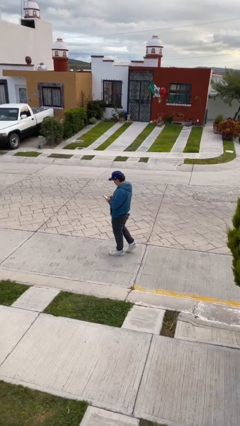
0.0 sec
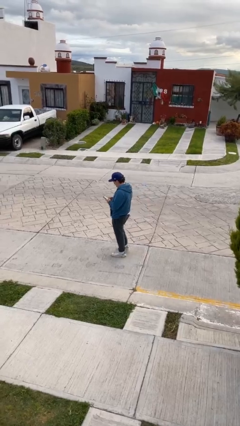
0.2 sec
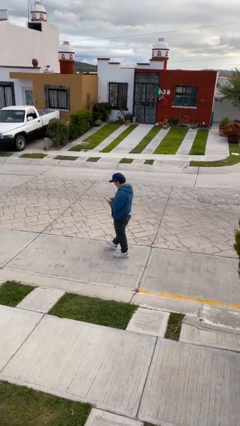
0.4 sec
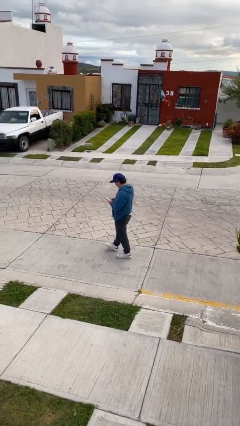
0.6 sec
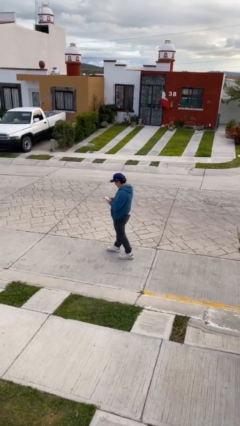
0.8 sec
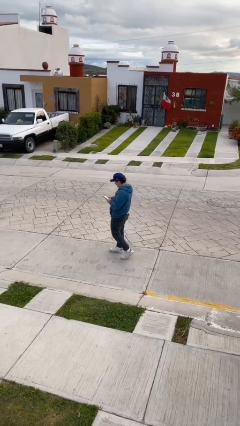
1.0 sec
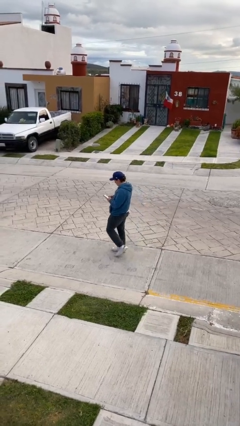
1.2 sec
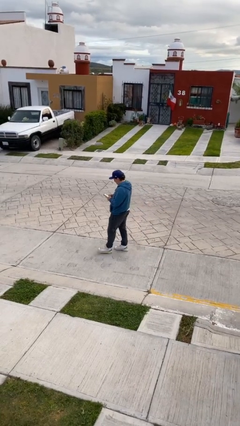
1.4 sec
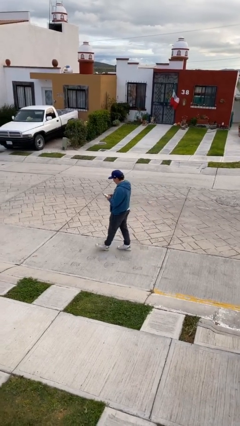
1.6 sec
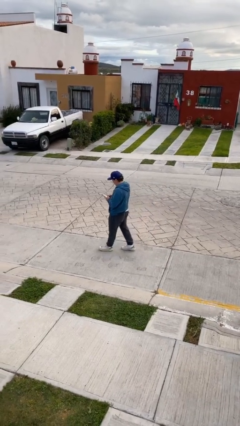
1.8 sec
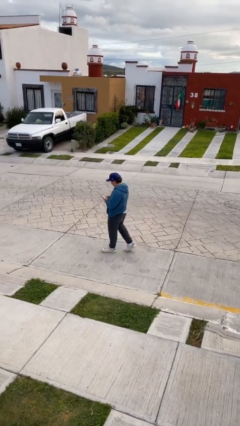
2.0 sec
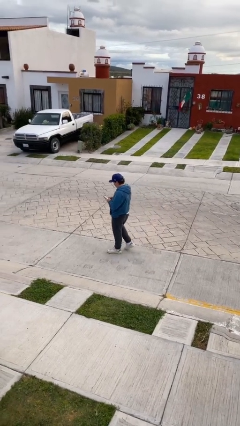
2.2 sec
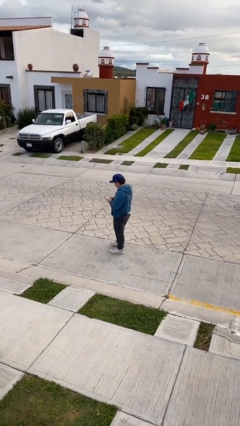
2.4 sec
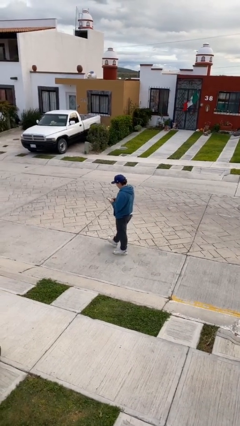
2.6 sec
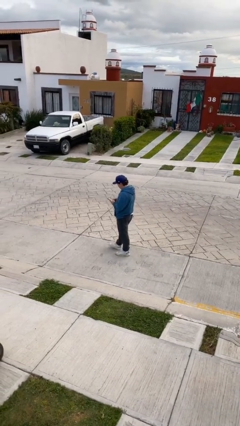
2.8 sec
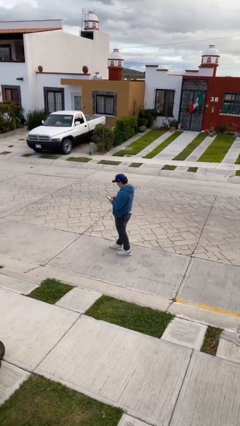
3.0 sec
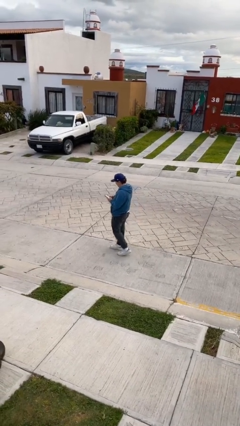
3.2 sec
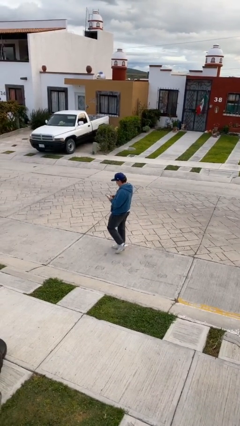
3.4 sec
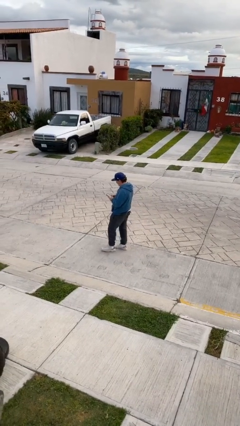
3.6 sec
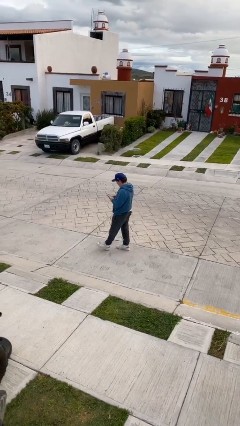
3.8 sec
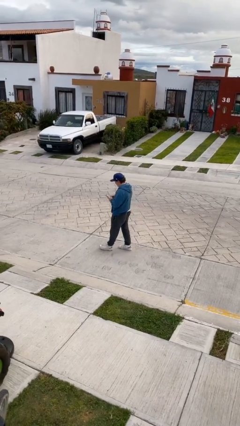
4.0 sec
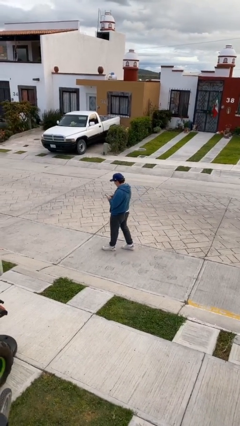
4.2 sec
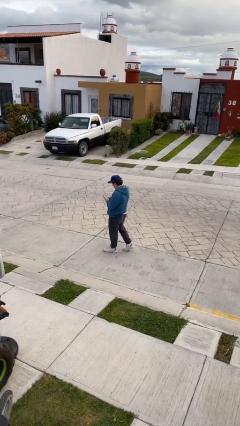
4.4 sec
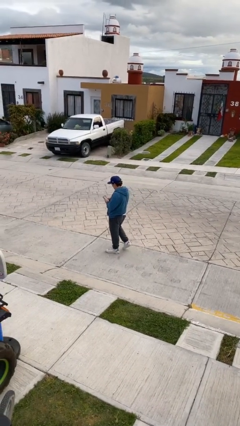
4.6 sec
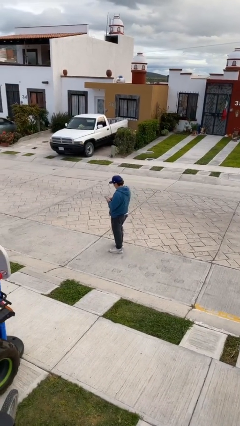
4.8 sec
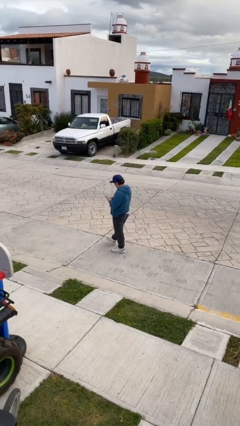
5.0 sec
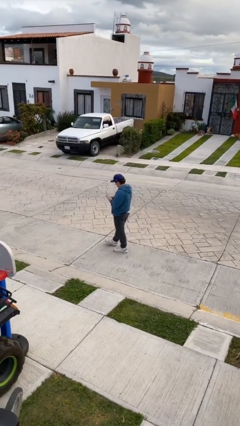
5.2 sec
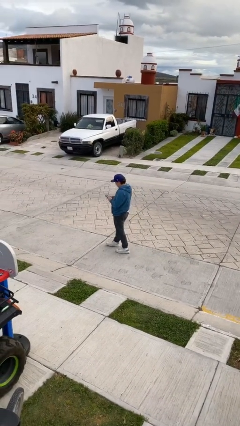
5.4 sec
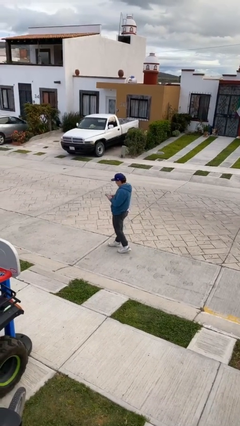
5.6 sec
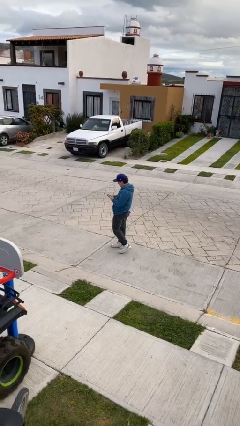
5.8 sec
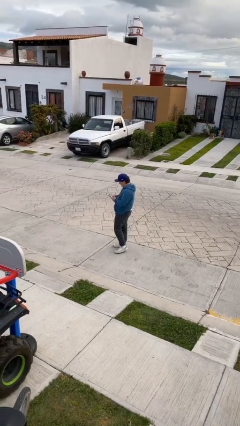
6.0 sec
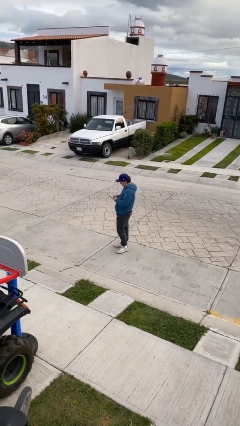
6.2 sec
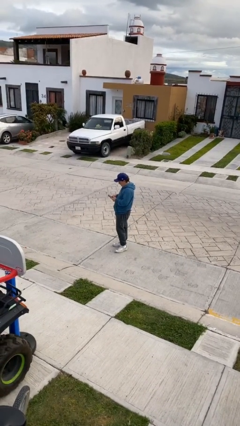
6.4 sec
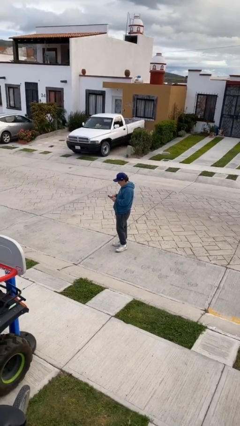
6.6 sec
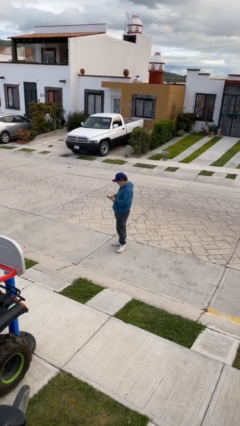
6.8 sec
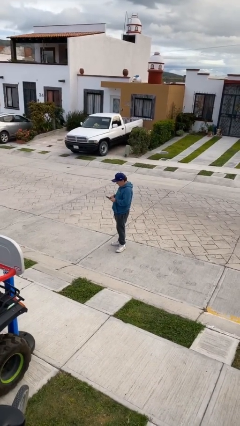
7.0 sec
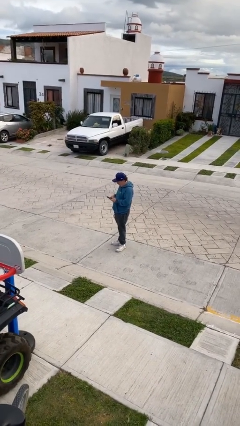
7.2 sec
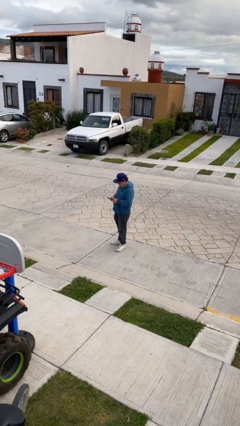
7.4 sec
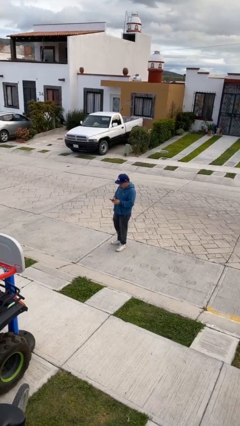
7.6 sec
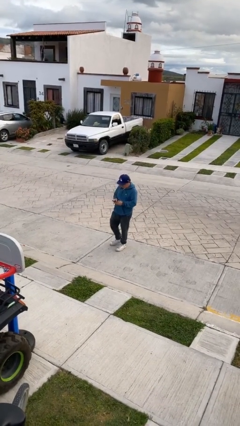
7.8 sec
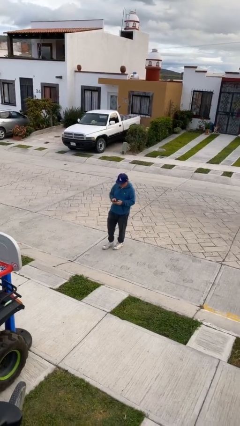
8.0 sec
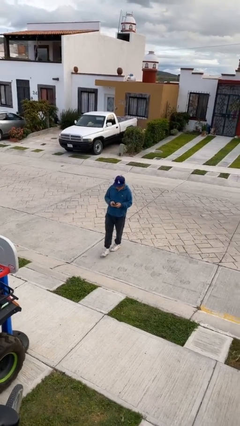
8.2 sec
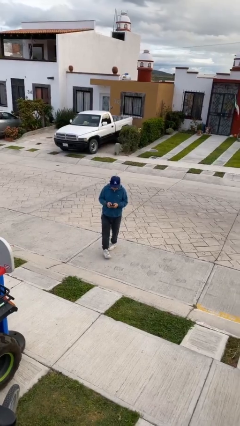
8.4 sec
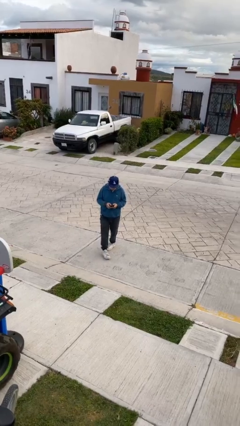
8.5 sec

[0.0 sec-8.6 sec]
person texts on phone

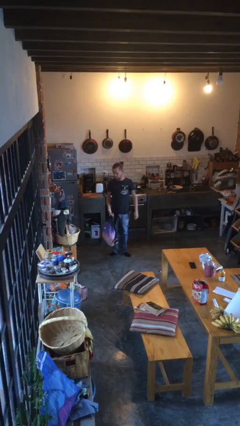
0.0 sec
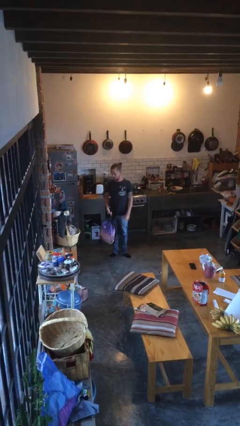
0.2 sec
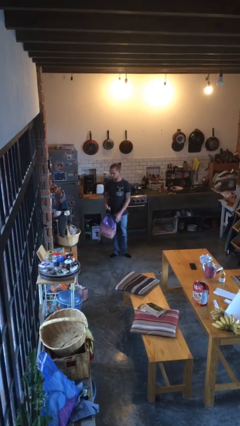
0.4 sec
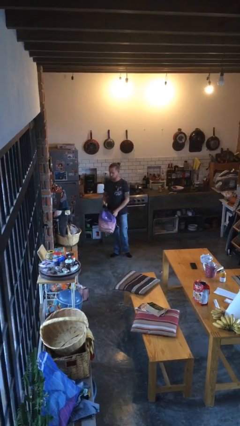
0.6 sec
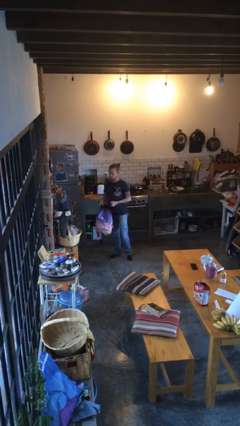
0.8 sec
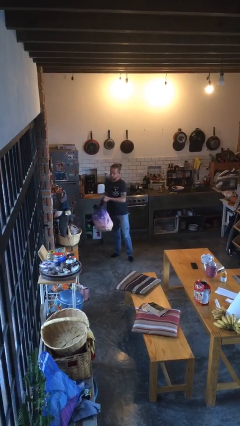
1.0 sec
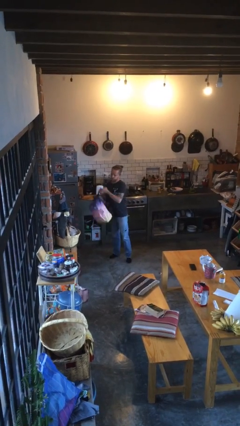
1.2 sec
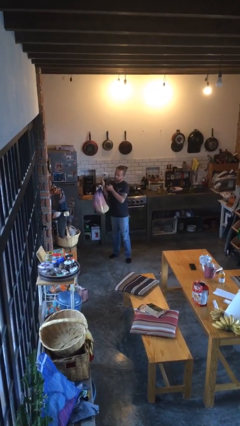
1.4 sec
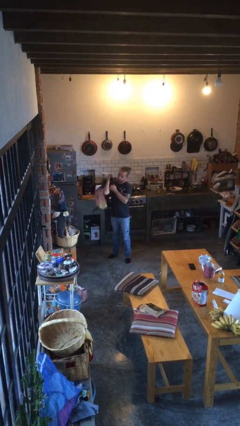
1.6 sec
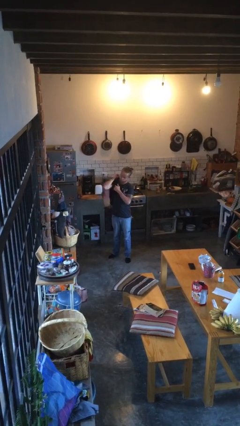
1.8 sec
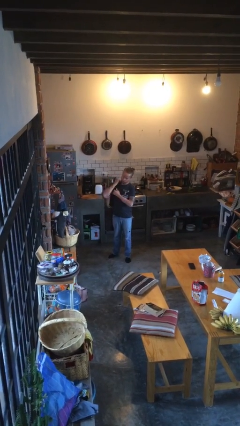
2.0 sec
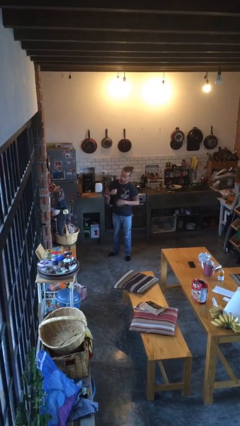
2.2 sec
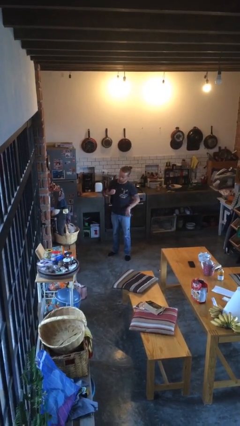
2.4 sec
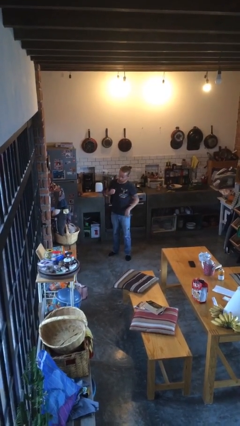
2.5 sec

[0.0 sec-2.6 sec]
person puts on backpack

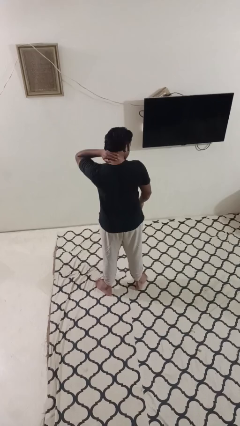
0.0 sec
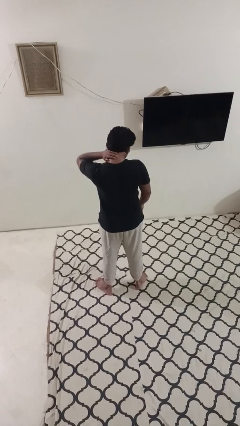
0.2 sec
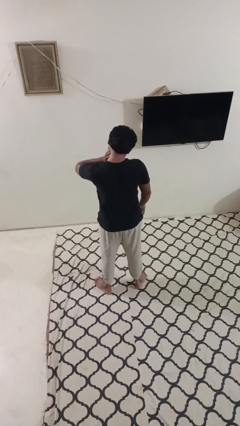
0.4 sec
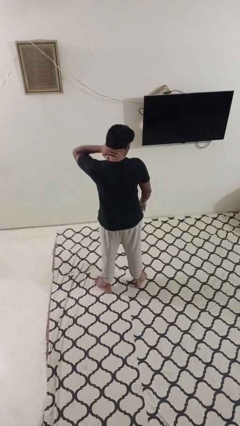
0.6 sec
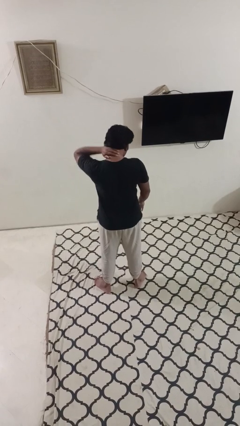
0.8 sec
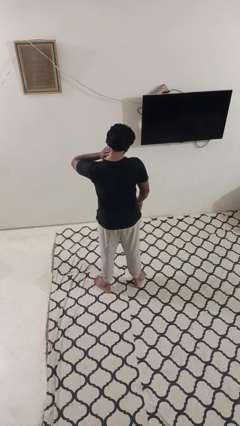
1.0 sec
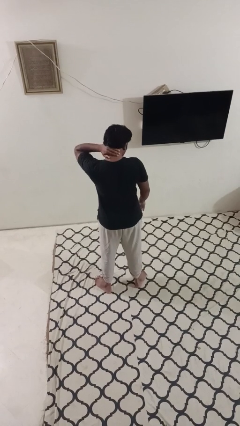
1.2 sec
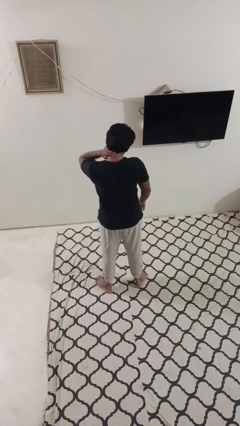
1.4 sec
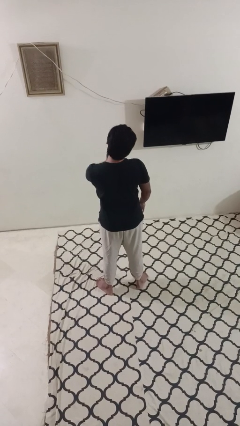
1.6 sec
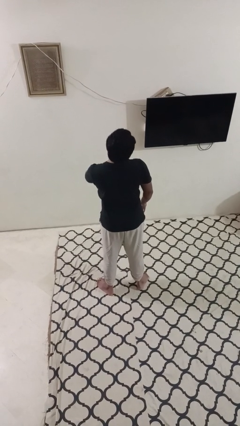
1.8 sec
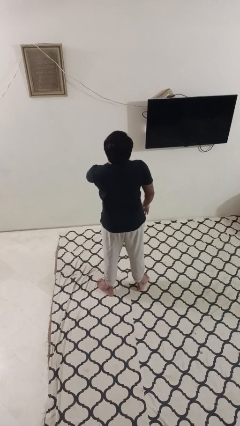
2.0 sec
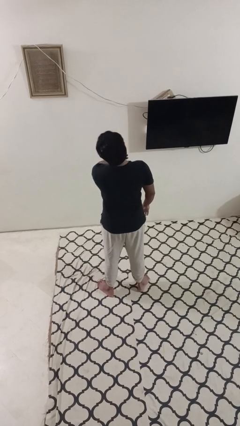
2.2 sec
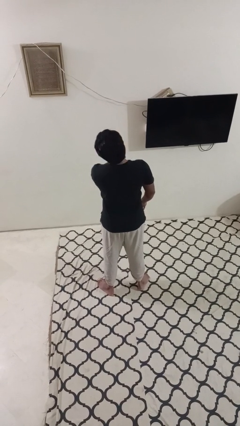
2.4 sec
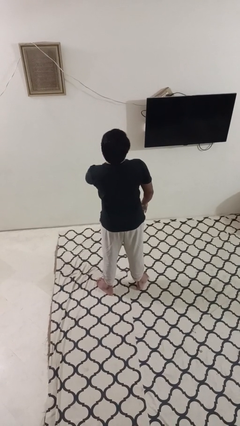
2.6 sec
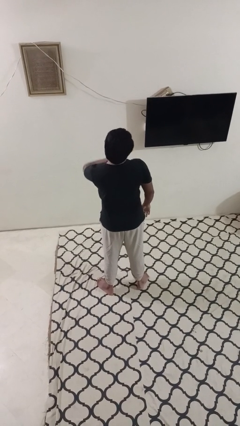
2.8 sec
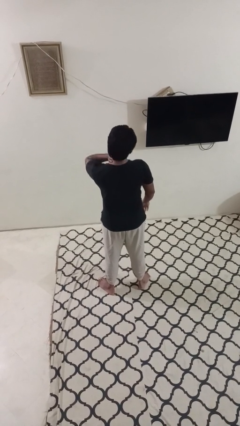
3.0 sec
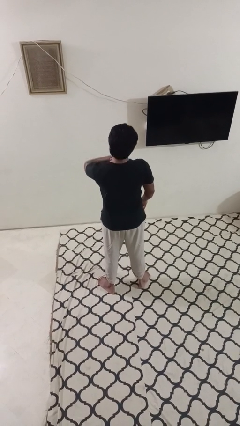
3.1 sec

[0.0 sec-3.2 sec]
person rubs neck

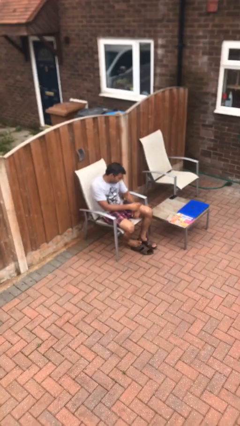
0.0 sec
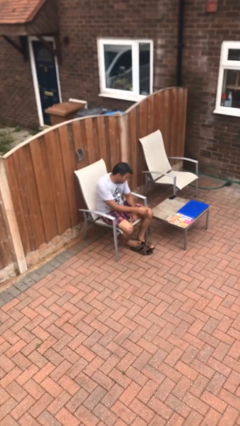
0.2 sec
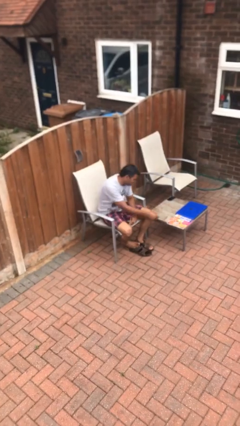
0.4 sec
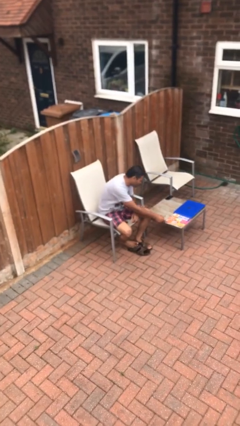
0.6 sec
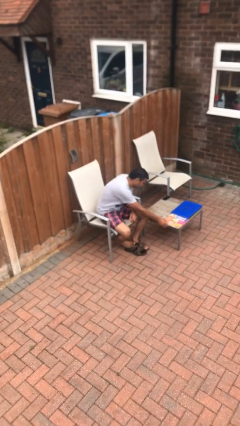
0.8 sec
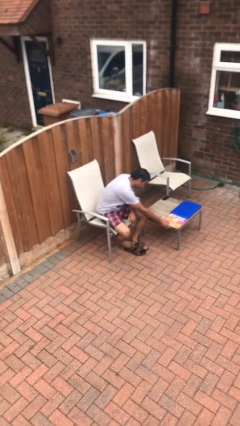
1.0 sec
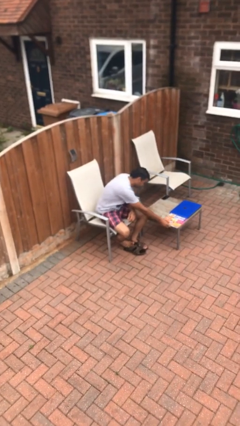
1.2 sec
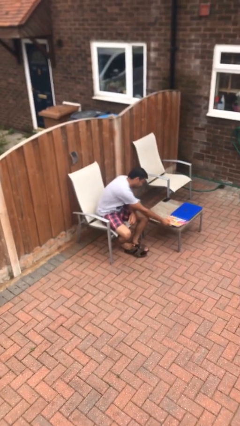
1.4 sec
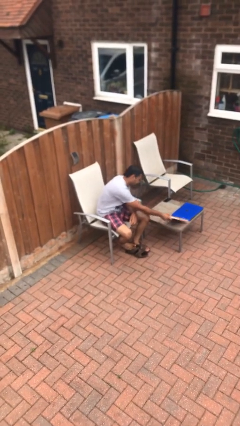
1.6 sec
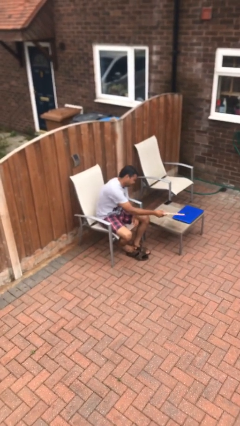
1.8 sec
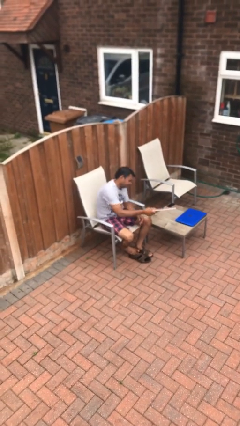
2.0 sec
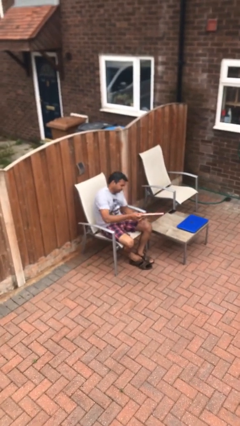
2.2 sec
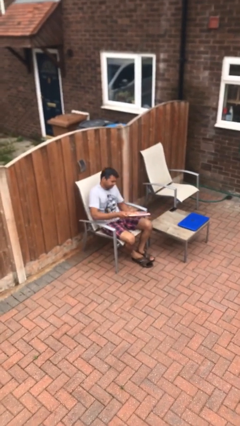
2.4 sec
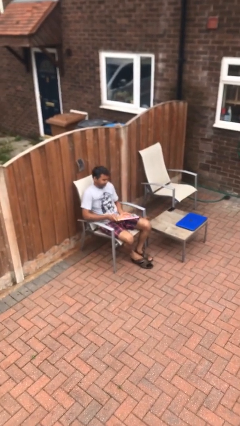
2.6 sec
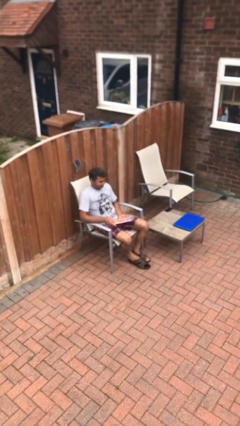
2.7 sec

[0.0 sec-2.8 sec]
person picks up object from table

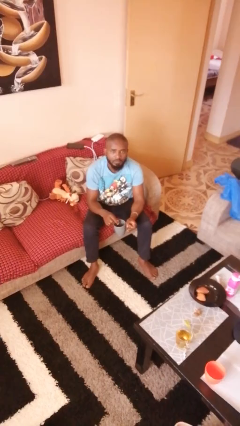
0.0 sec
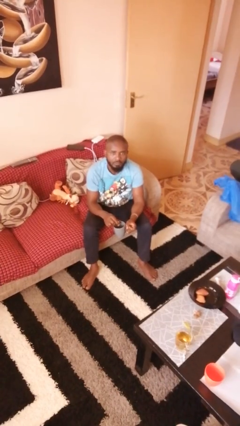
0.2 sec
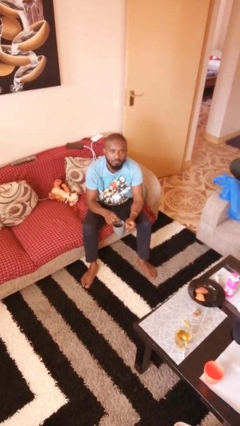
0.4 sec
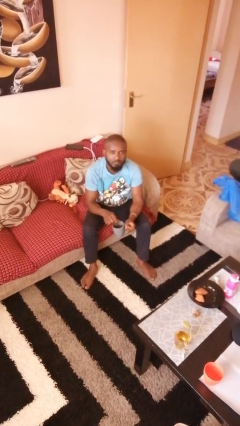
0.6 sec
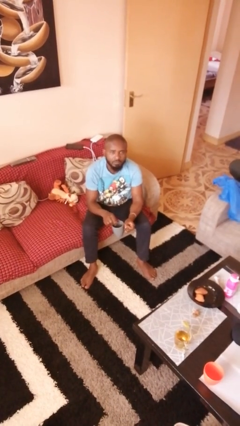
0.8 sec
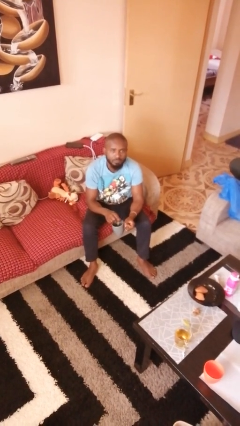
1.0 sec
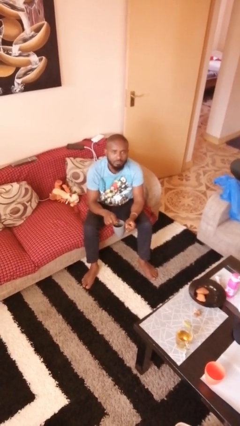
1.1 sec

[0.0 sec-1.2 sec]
person stirs mug
